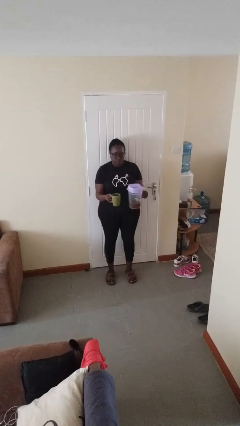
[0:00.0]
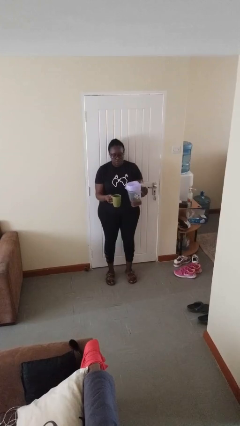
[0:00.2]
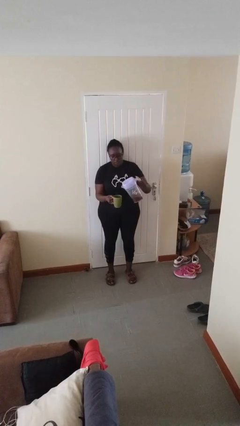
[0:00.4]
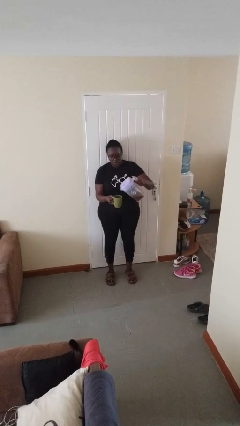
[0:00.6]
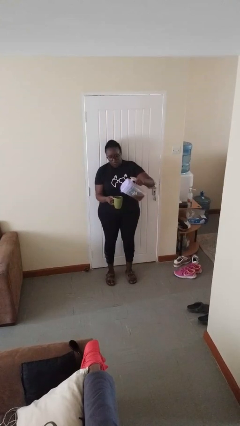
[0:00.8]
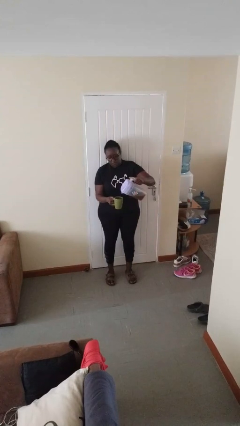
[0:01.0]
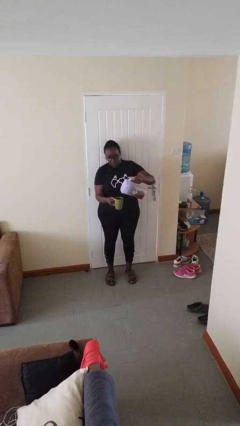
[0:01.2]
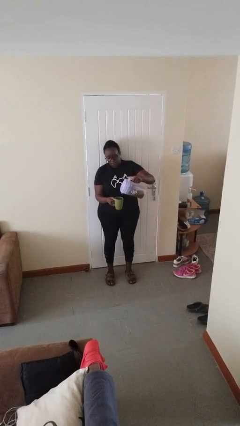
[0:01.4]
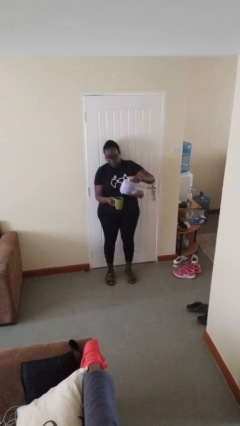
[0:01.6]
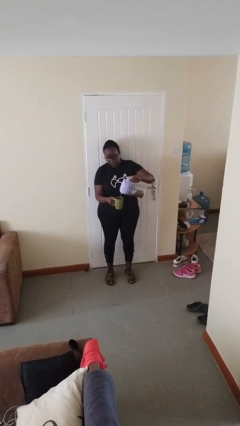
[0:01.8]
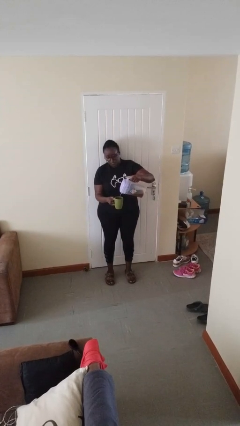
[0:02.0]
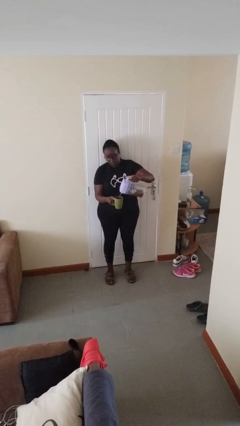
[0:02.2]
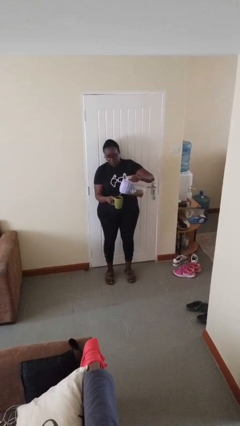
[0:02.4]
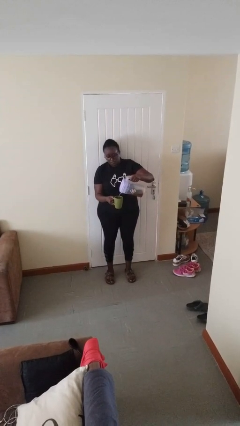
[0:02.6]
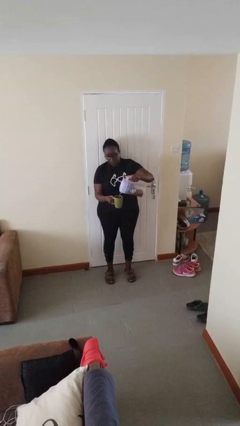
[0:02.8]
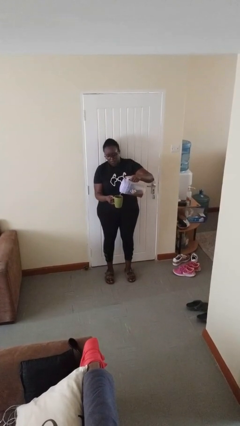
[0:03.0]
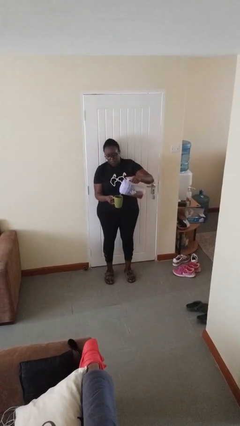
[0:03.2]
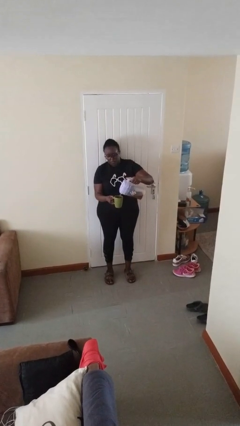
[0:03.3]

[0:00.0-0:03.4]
person pours coffee into mug

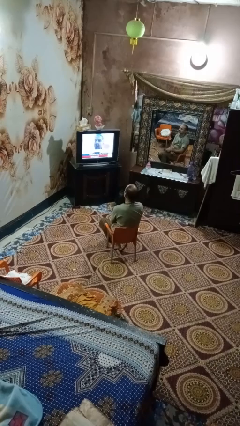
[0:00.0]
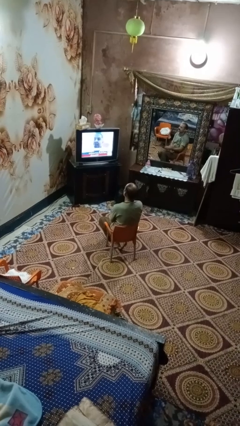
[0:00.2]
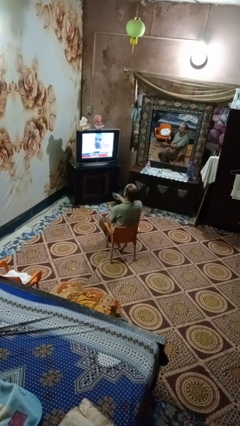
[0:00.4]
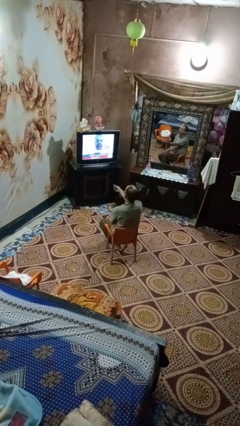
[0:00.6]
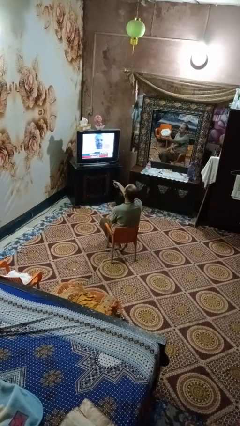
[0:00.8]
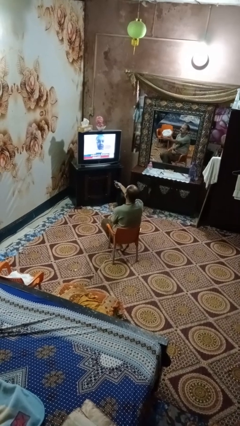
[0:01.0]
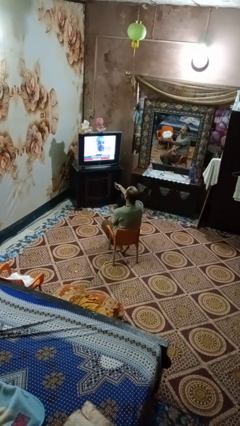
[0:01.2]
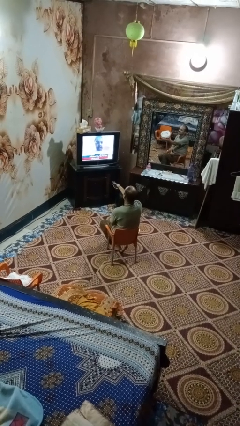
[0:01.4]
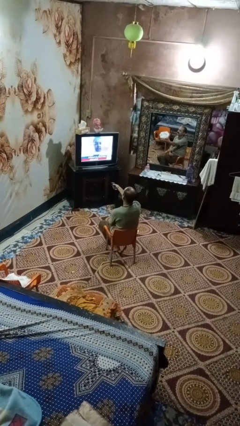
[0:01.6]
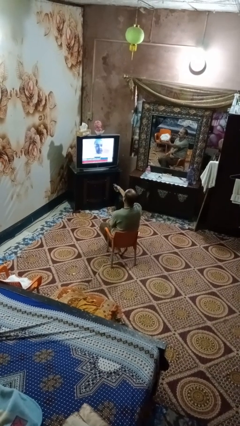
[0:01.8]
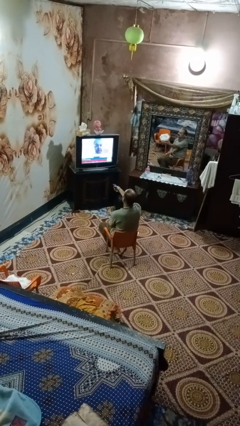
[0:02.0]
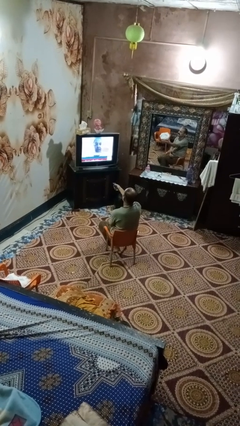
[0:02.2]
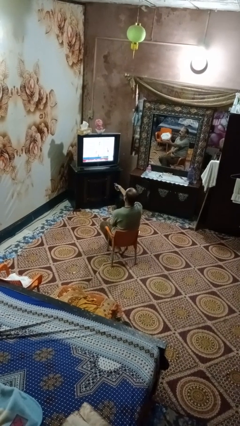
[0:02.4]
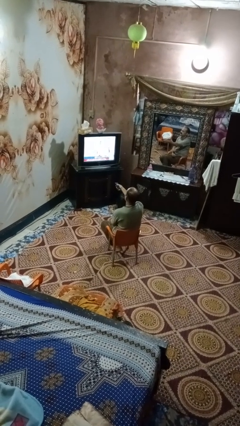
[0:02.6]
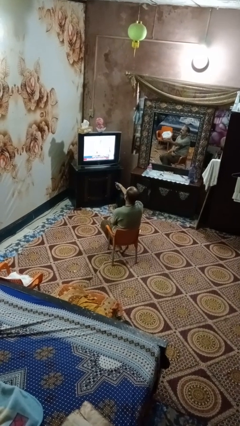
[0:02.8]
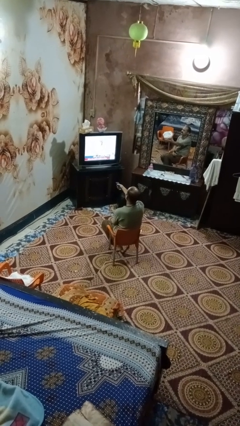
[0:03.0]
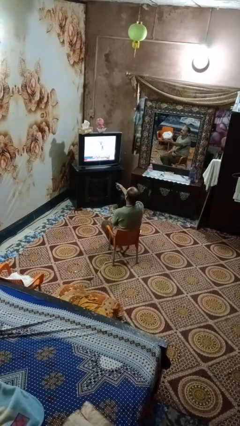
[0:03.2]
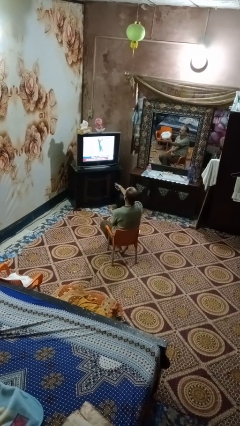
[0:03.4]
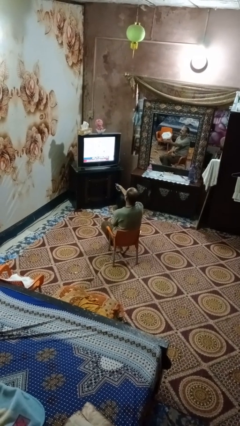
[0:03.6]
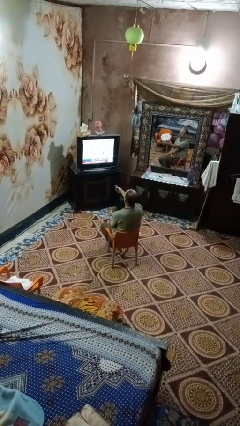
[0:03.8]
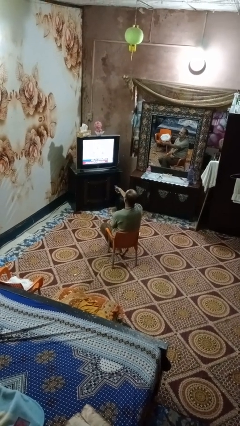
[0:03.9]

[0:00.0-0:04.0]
person uses television remote

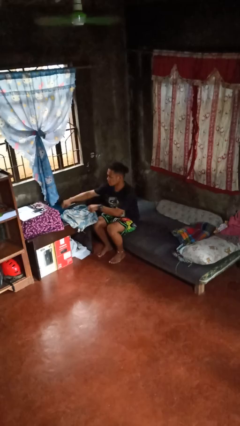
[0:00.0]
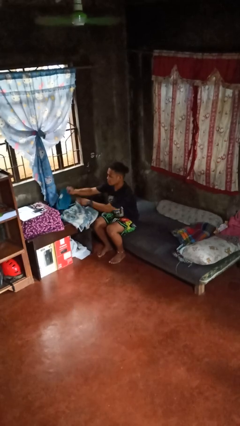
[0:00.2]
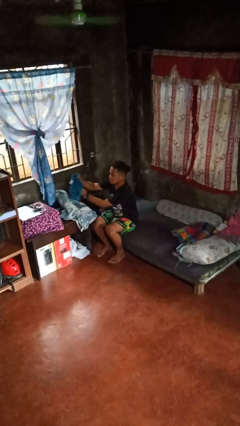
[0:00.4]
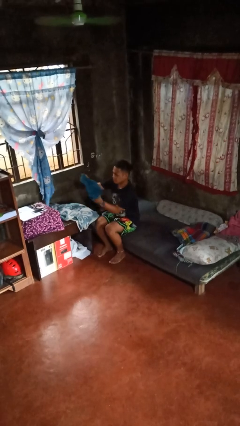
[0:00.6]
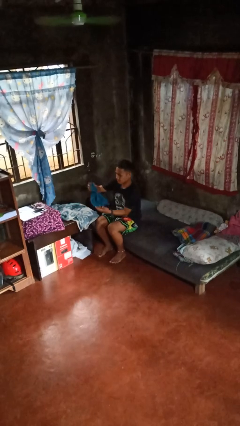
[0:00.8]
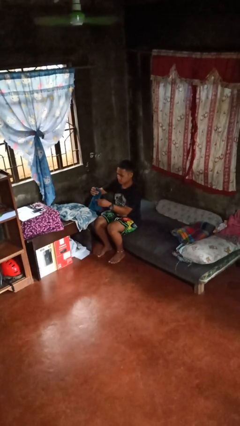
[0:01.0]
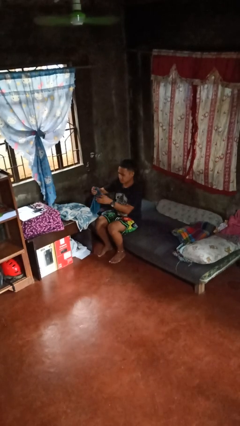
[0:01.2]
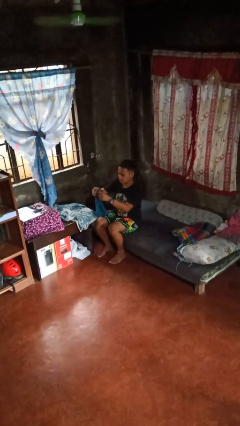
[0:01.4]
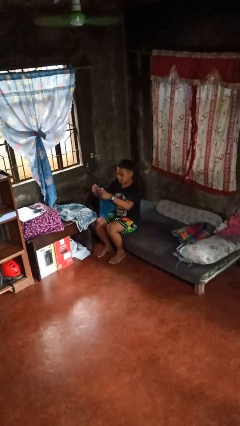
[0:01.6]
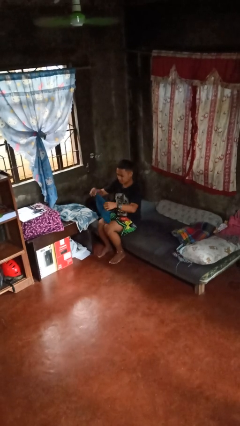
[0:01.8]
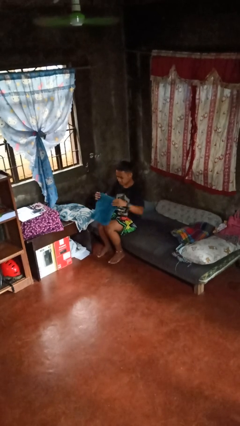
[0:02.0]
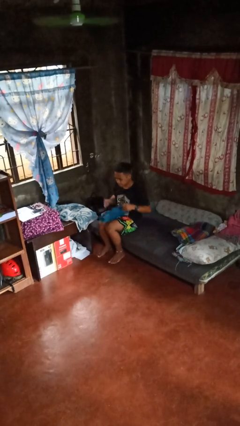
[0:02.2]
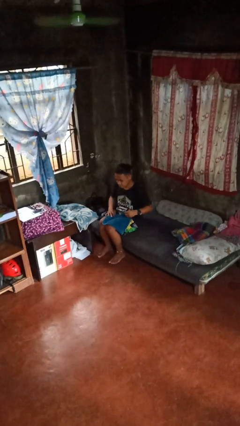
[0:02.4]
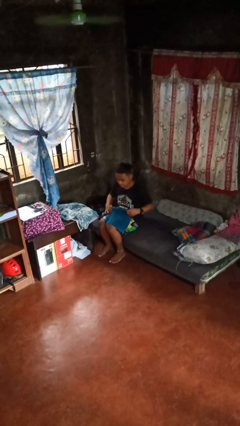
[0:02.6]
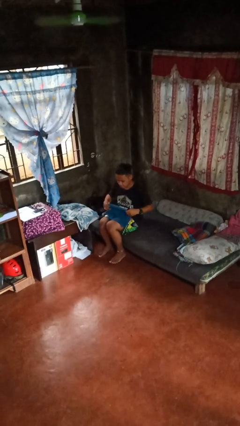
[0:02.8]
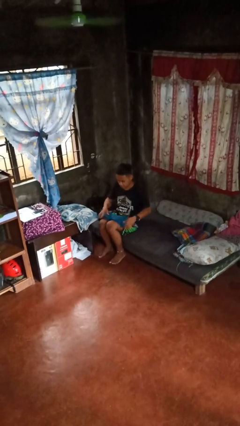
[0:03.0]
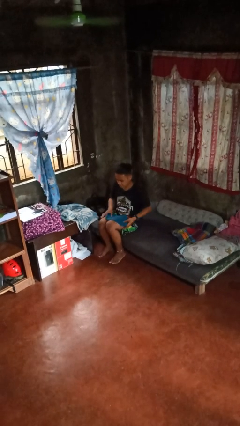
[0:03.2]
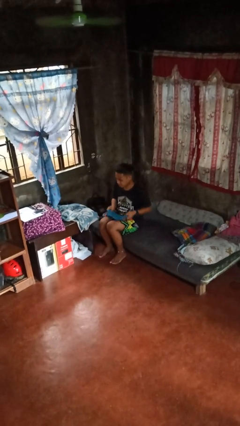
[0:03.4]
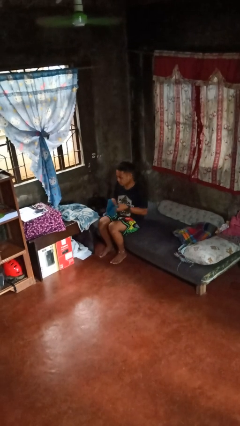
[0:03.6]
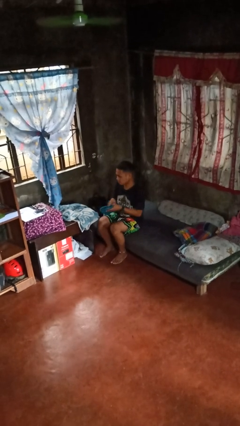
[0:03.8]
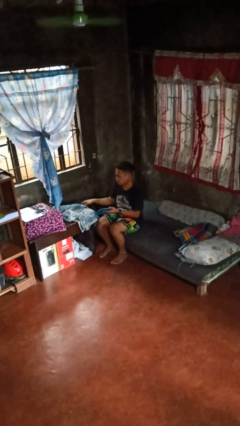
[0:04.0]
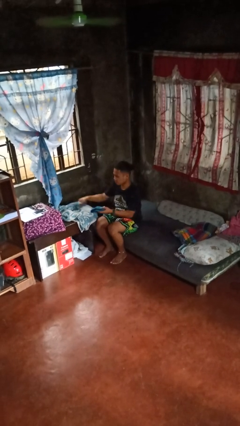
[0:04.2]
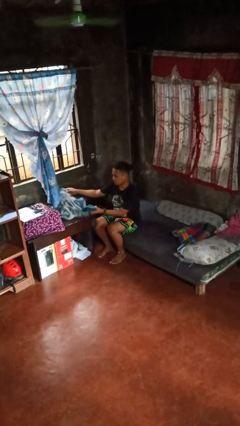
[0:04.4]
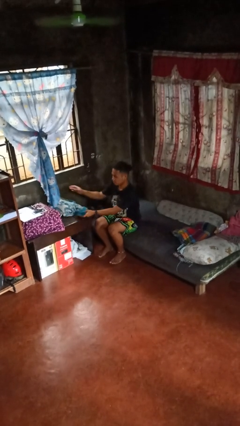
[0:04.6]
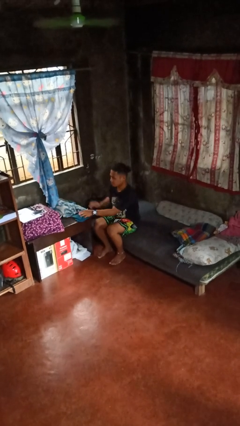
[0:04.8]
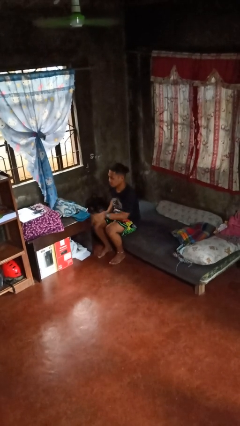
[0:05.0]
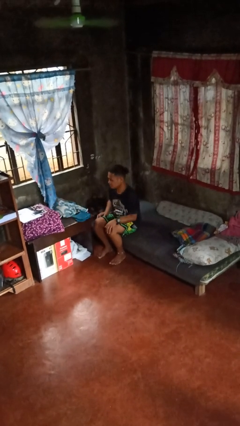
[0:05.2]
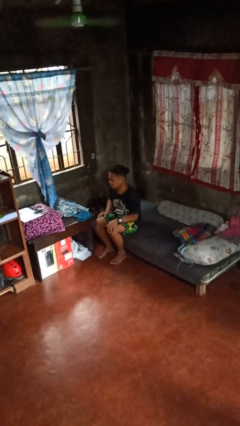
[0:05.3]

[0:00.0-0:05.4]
person folds towel

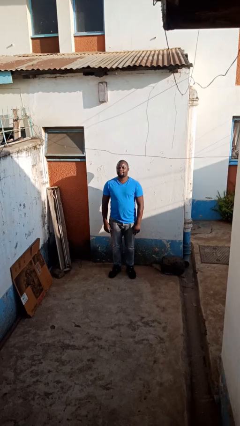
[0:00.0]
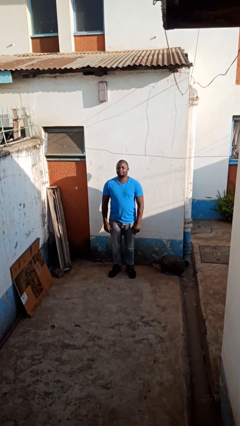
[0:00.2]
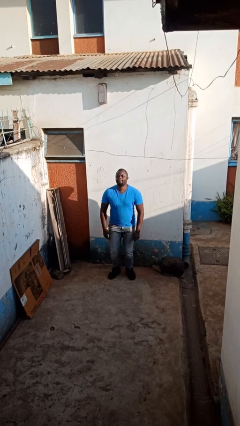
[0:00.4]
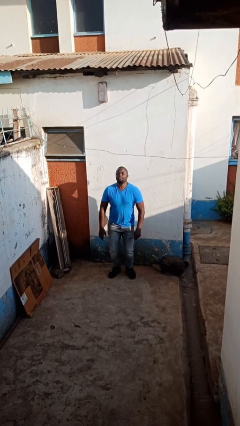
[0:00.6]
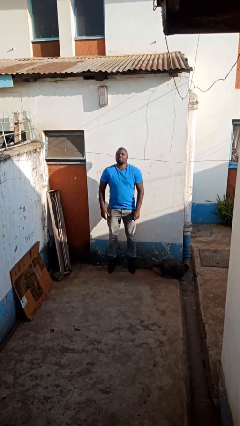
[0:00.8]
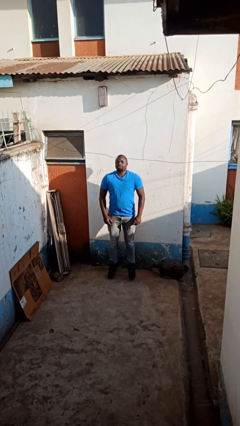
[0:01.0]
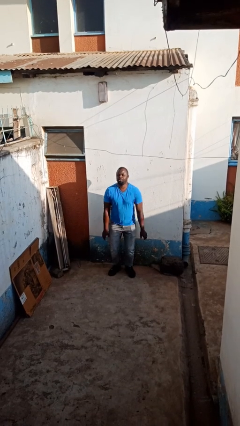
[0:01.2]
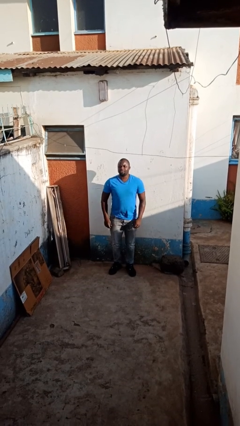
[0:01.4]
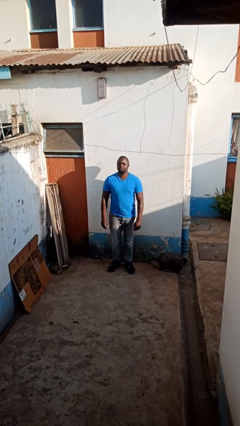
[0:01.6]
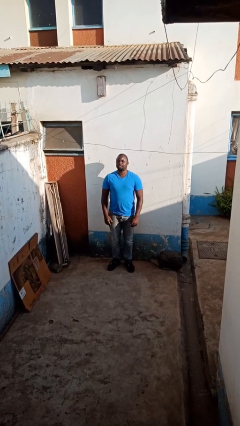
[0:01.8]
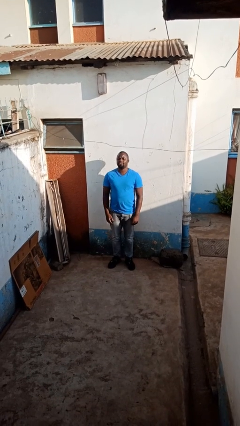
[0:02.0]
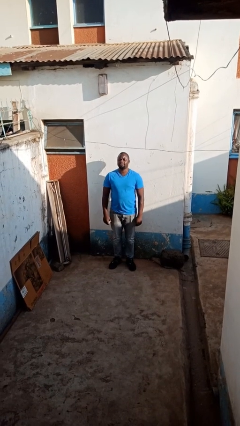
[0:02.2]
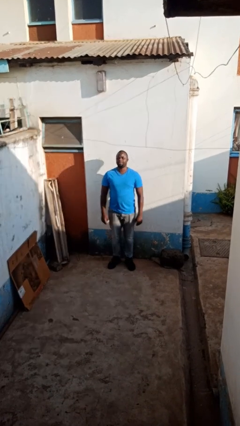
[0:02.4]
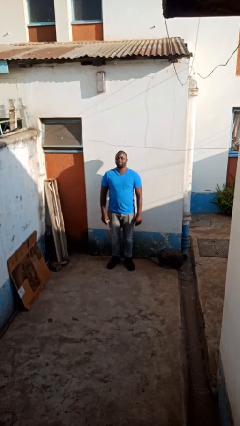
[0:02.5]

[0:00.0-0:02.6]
person jumps

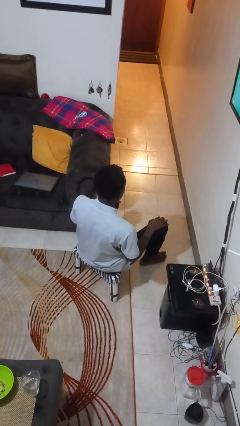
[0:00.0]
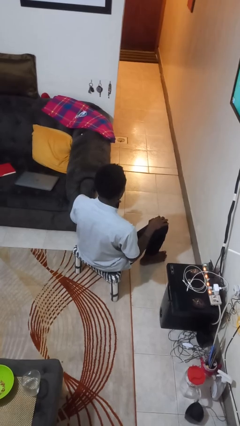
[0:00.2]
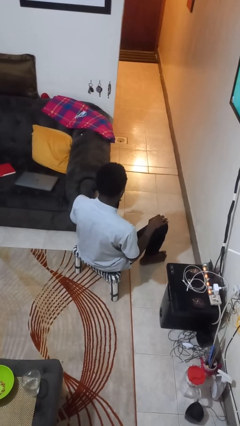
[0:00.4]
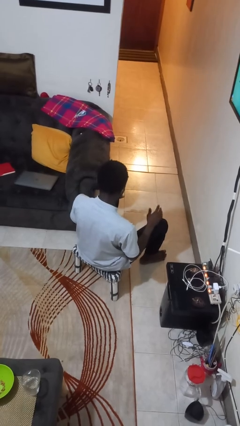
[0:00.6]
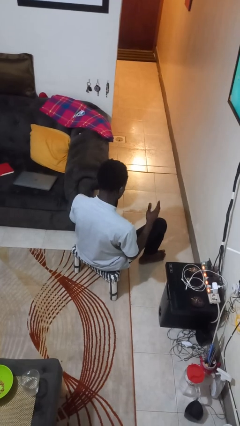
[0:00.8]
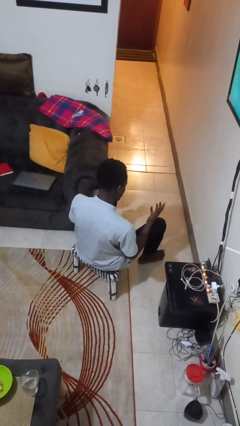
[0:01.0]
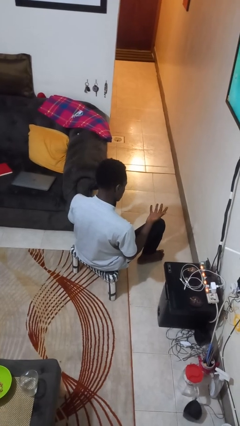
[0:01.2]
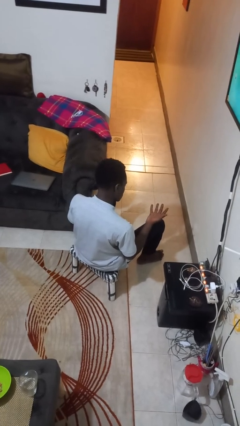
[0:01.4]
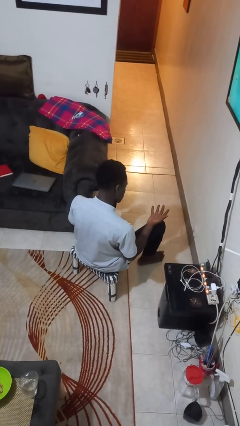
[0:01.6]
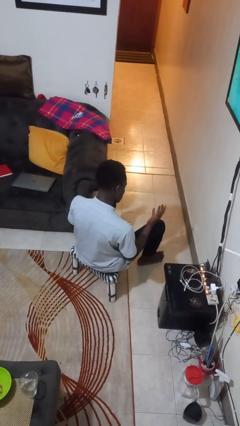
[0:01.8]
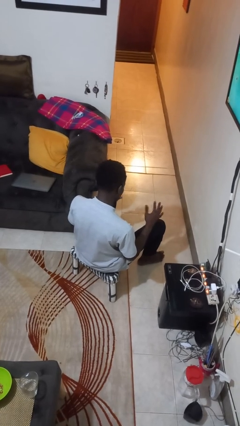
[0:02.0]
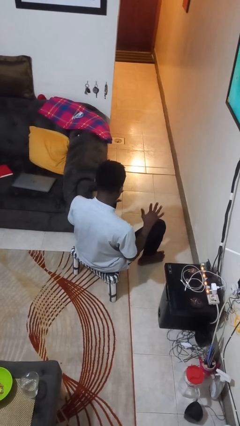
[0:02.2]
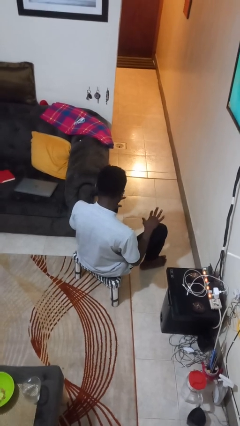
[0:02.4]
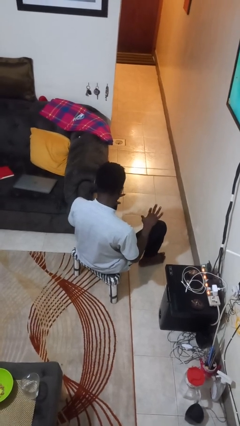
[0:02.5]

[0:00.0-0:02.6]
person looks at hands in lap
